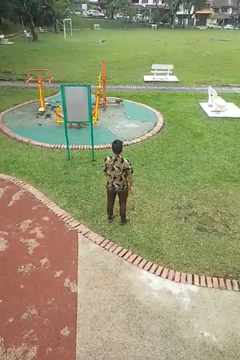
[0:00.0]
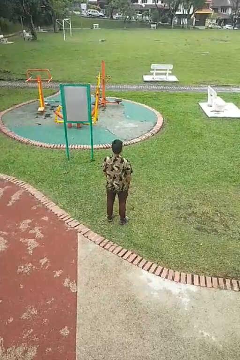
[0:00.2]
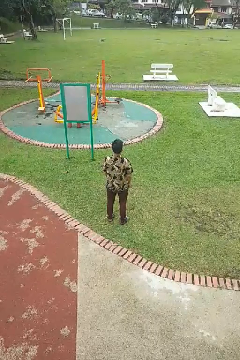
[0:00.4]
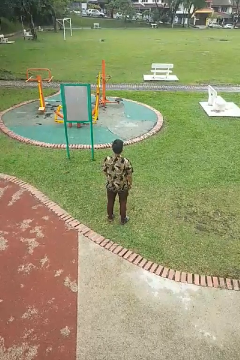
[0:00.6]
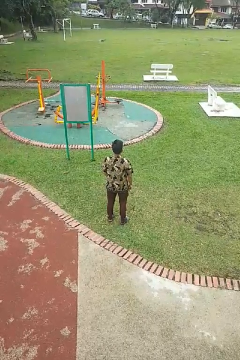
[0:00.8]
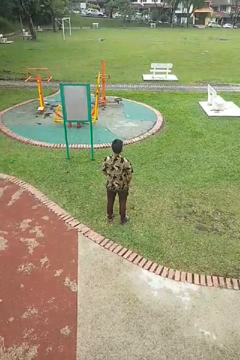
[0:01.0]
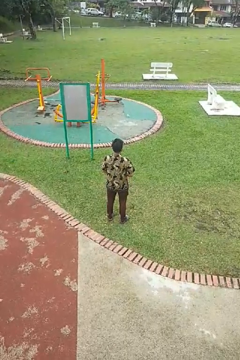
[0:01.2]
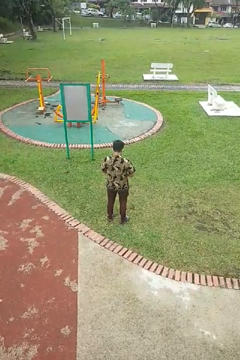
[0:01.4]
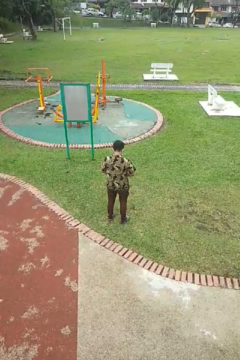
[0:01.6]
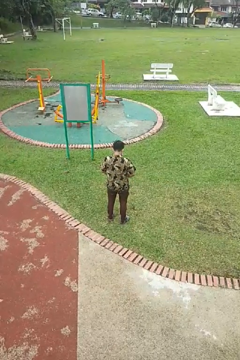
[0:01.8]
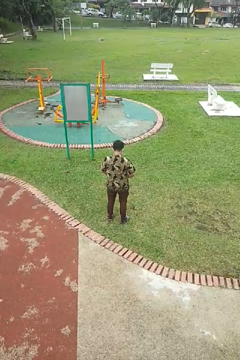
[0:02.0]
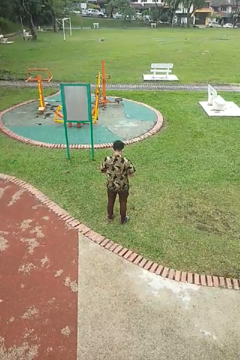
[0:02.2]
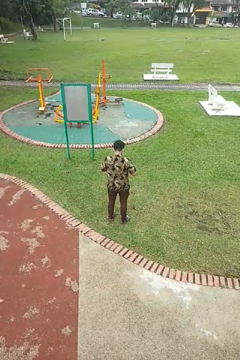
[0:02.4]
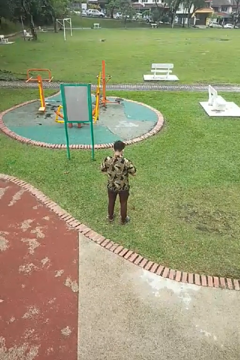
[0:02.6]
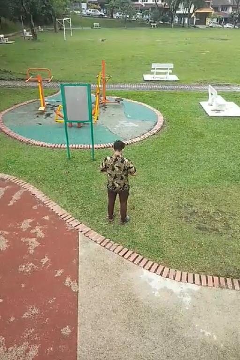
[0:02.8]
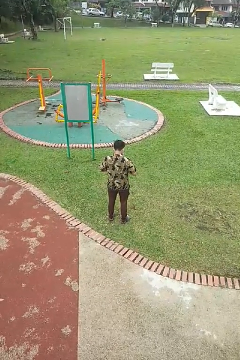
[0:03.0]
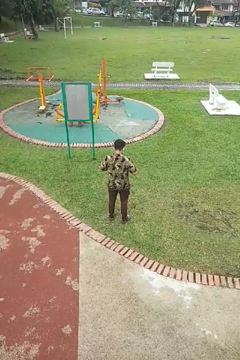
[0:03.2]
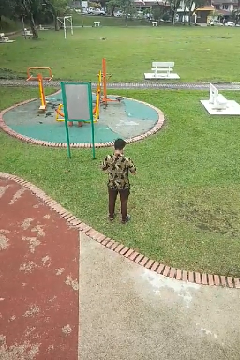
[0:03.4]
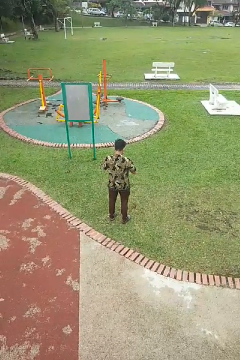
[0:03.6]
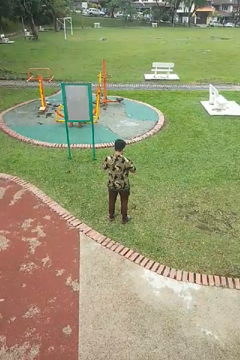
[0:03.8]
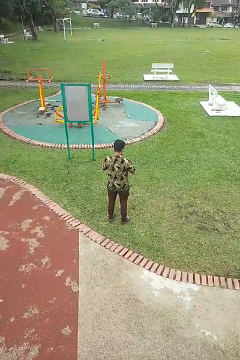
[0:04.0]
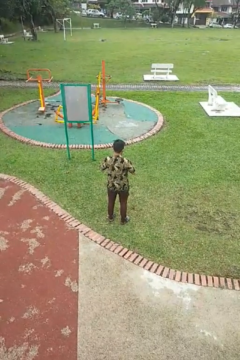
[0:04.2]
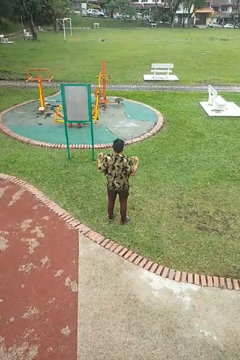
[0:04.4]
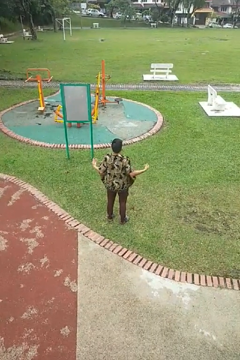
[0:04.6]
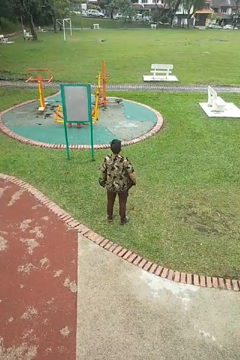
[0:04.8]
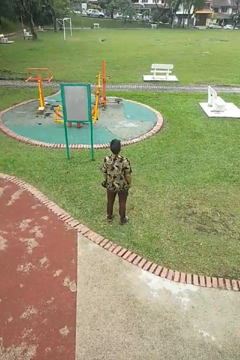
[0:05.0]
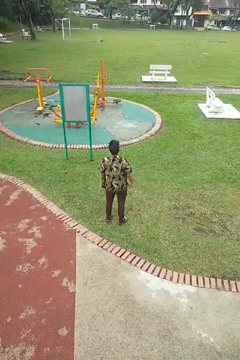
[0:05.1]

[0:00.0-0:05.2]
person unbuttons shirt

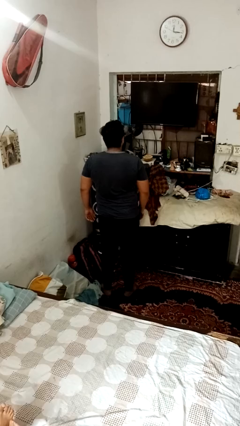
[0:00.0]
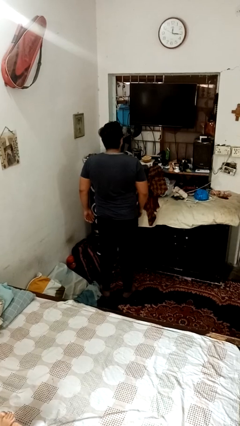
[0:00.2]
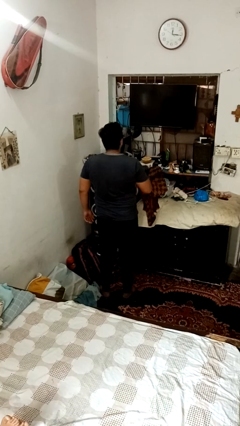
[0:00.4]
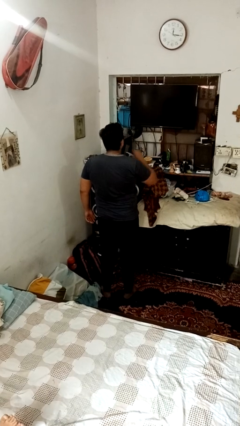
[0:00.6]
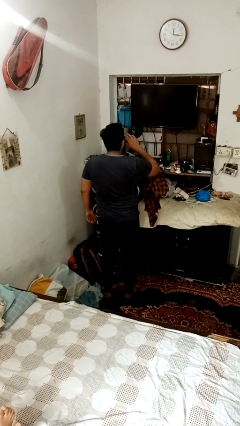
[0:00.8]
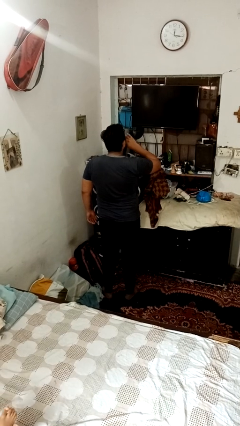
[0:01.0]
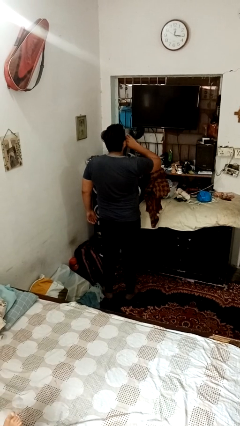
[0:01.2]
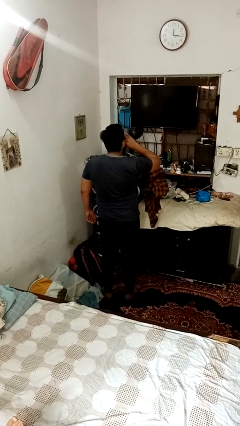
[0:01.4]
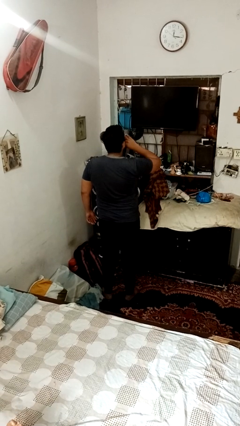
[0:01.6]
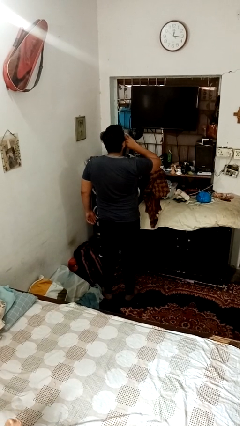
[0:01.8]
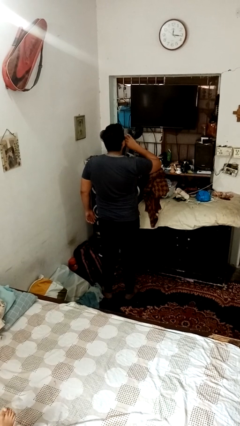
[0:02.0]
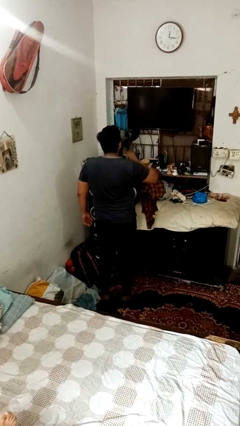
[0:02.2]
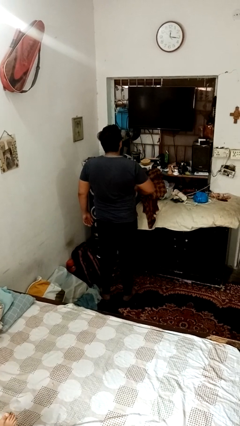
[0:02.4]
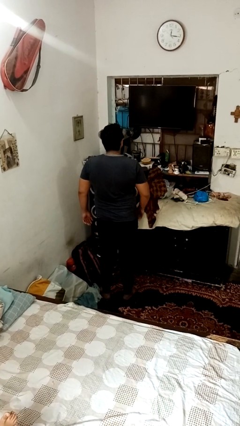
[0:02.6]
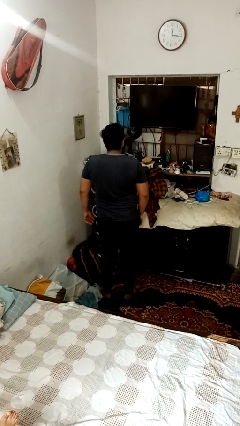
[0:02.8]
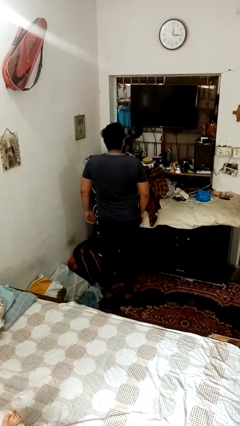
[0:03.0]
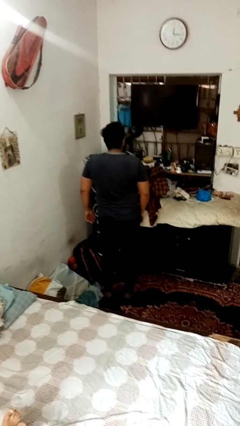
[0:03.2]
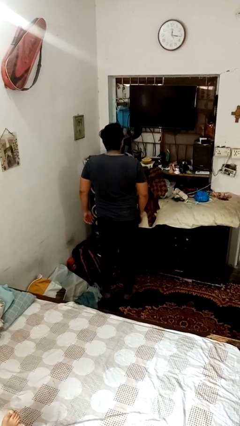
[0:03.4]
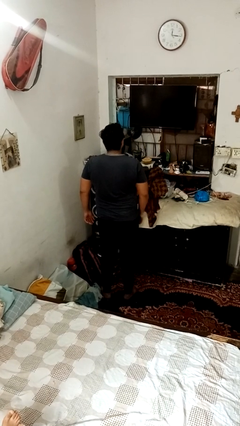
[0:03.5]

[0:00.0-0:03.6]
person yawns

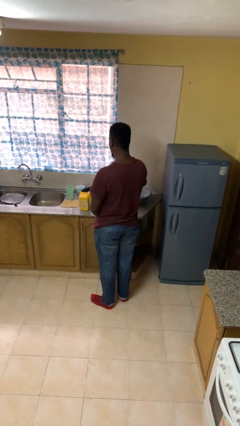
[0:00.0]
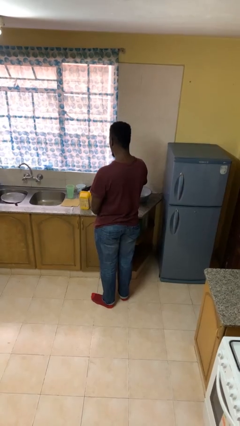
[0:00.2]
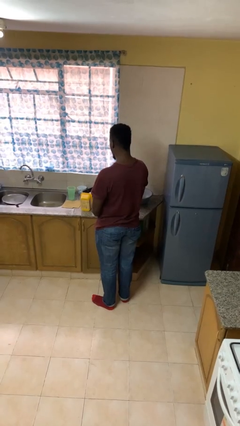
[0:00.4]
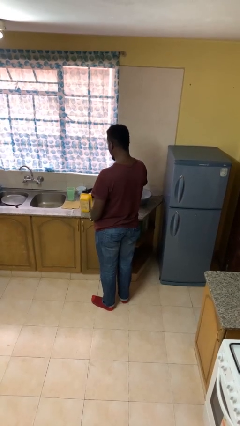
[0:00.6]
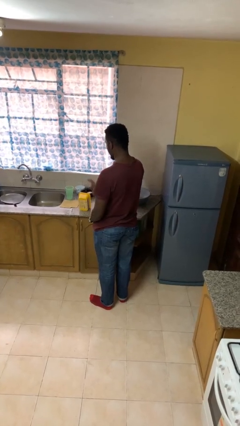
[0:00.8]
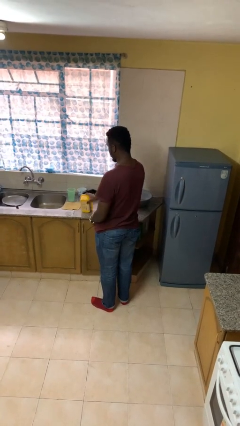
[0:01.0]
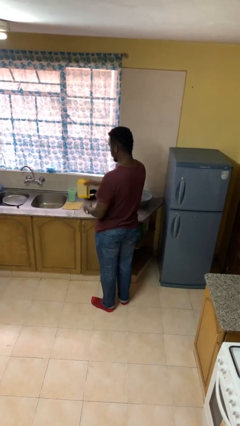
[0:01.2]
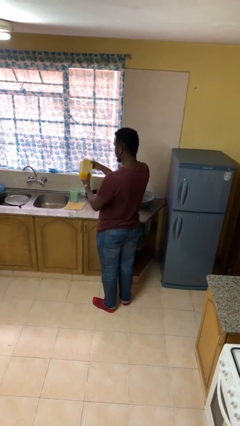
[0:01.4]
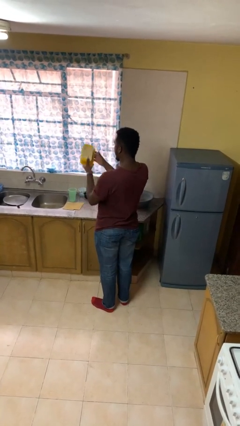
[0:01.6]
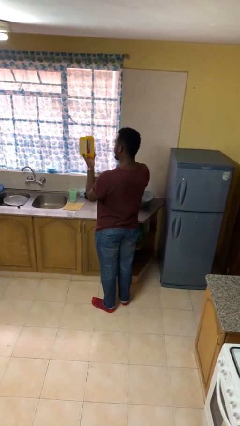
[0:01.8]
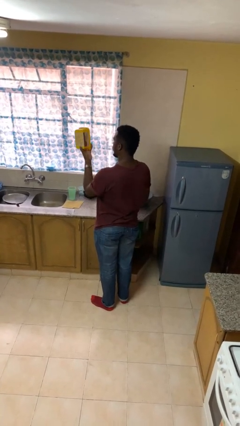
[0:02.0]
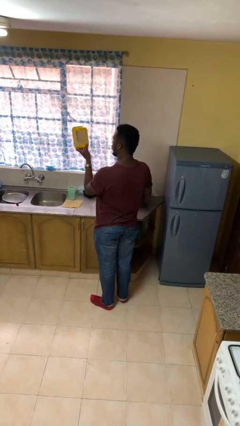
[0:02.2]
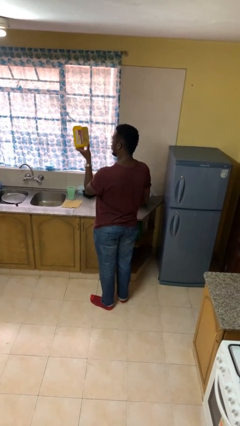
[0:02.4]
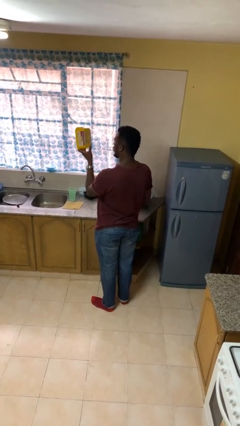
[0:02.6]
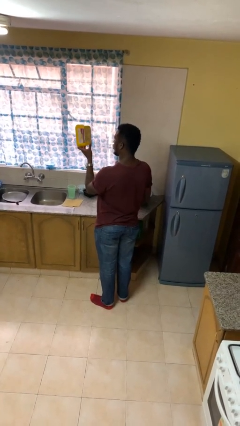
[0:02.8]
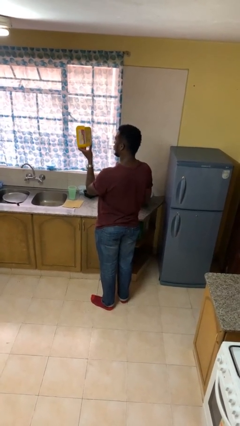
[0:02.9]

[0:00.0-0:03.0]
person picks up object from countertop

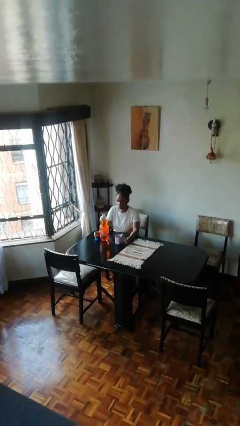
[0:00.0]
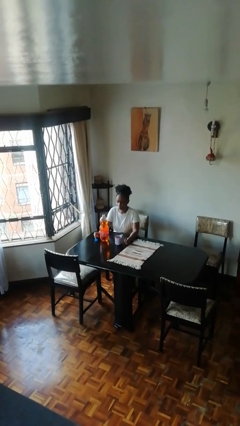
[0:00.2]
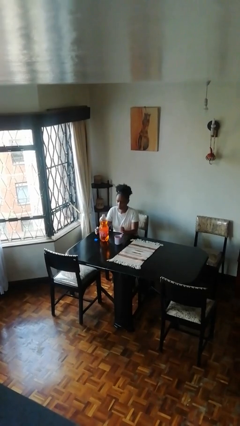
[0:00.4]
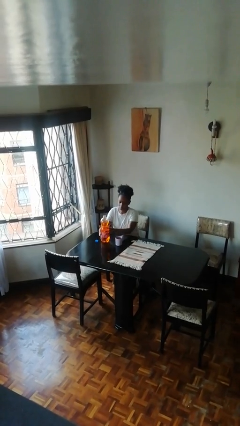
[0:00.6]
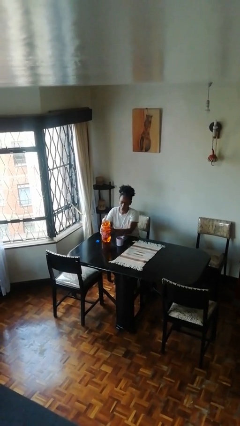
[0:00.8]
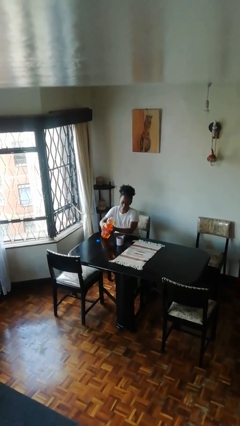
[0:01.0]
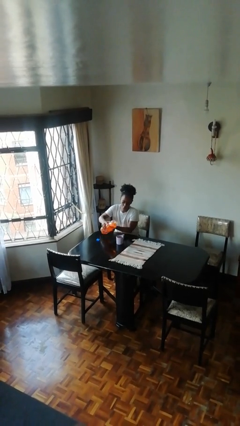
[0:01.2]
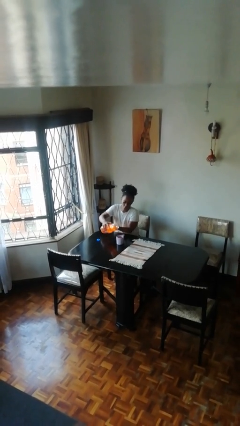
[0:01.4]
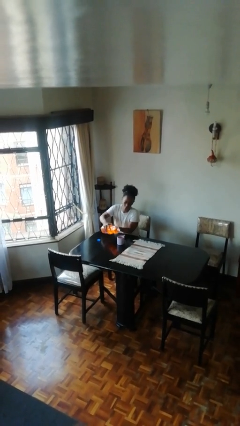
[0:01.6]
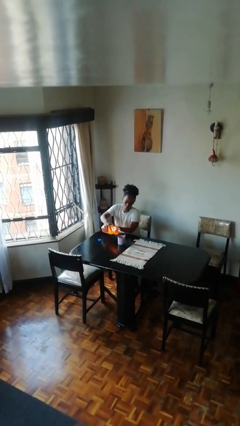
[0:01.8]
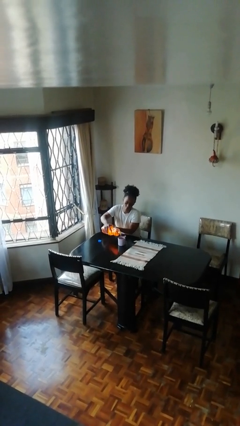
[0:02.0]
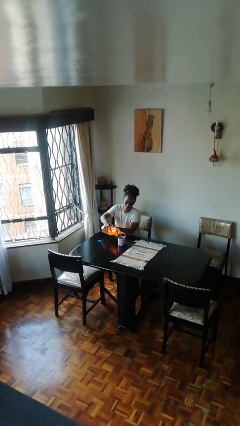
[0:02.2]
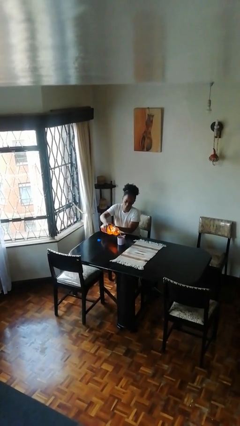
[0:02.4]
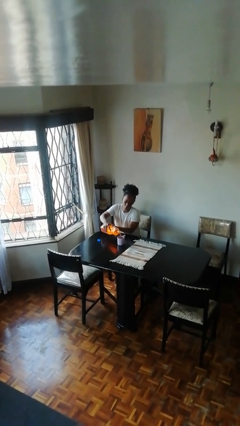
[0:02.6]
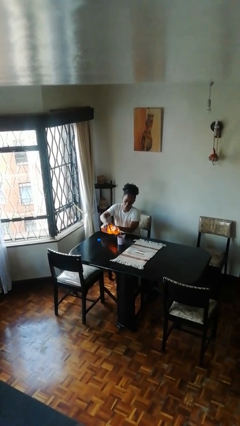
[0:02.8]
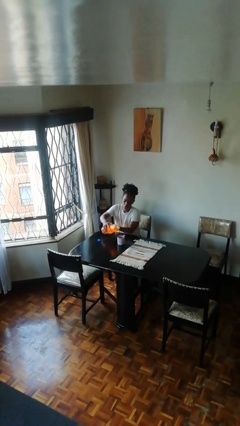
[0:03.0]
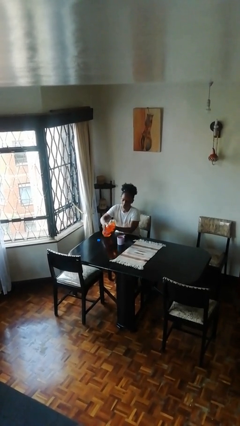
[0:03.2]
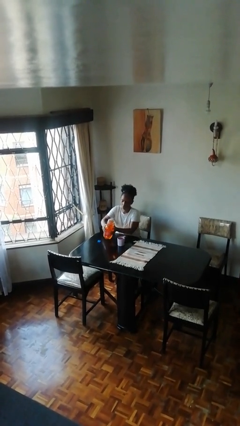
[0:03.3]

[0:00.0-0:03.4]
person pours liquid into cup

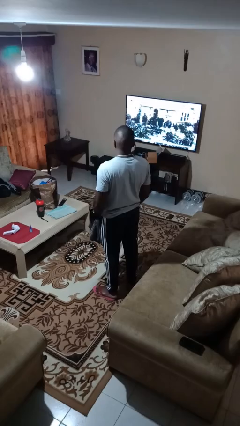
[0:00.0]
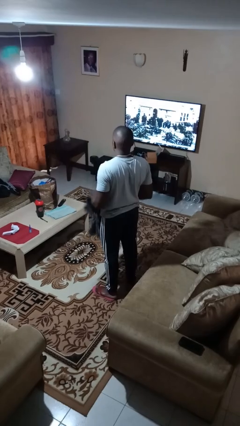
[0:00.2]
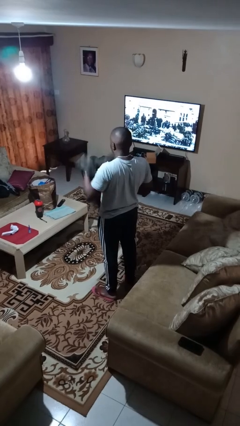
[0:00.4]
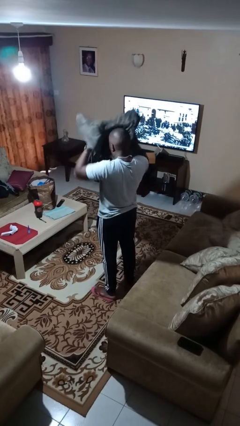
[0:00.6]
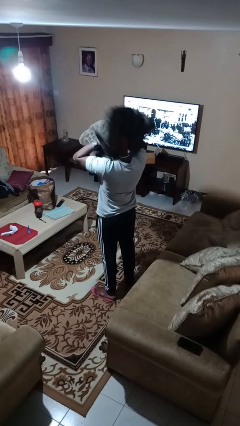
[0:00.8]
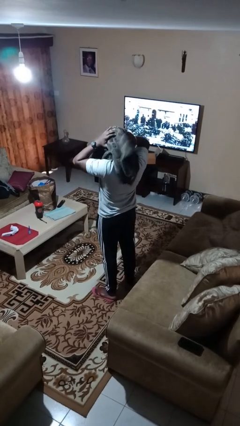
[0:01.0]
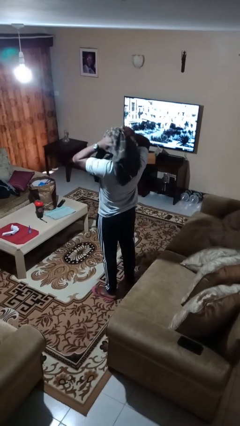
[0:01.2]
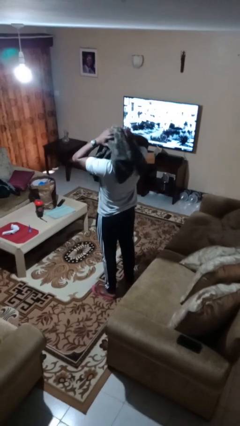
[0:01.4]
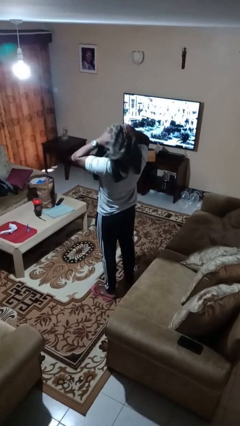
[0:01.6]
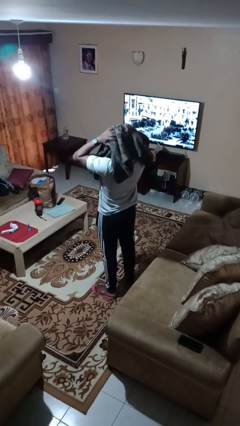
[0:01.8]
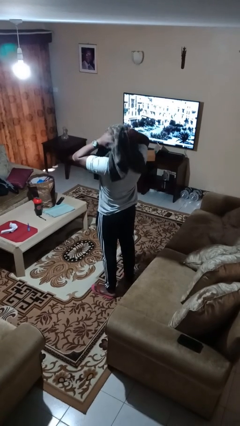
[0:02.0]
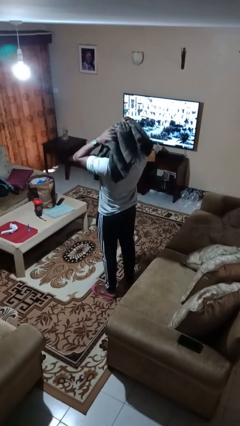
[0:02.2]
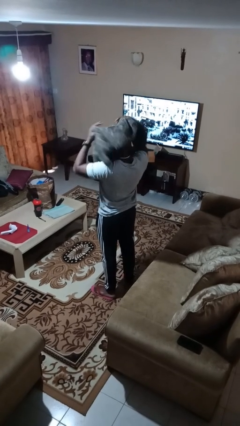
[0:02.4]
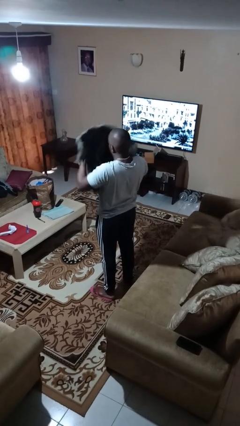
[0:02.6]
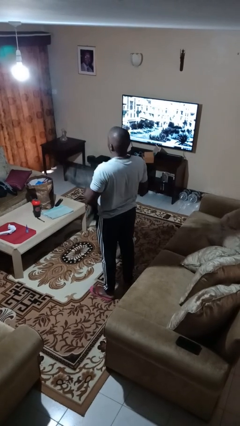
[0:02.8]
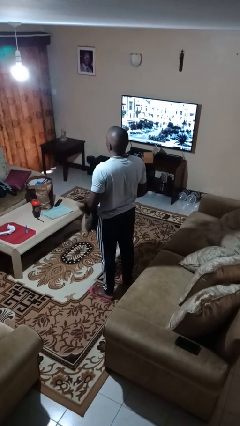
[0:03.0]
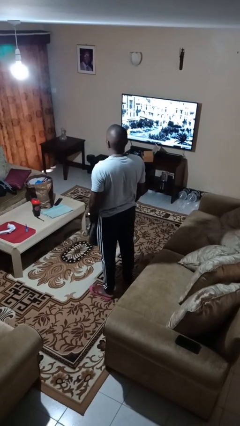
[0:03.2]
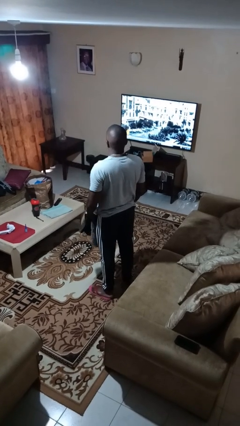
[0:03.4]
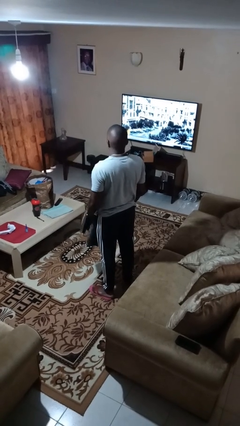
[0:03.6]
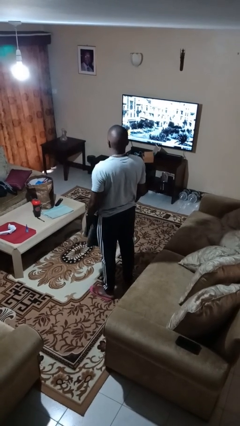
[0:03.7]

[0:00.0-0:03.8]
person dries hair with towel
